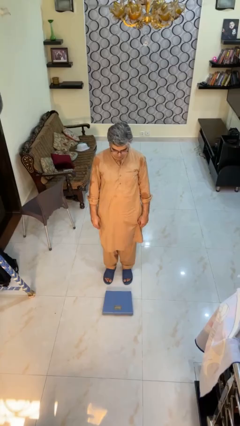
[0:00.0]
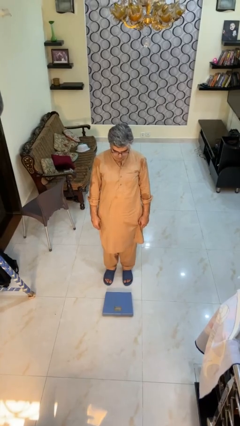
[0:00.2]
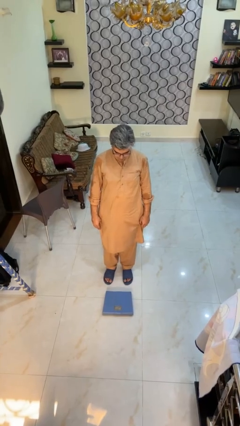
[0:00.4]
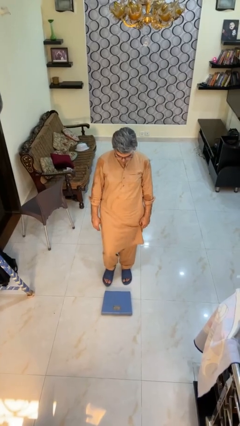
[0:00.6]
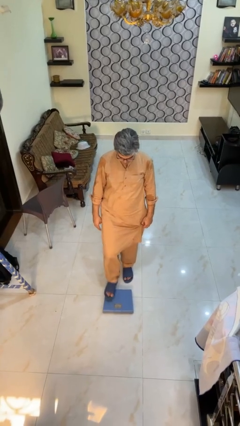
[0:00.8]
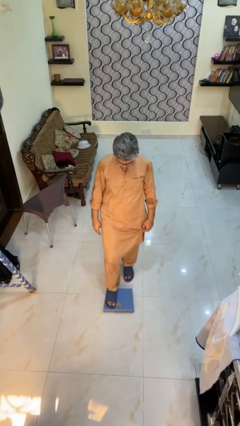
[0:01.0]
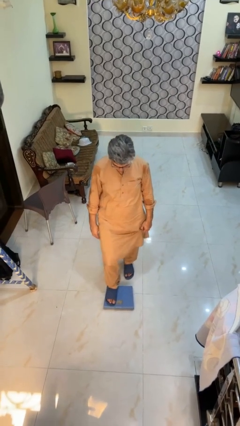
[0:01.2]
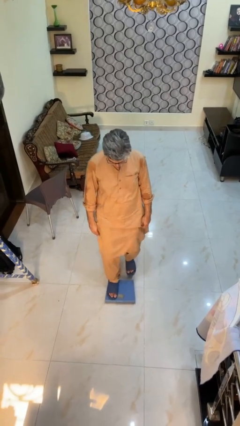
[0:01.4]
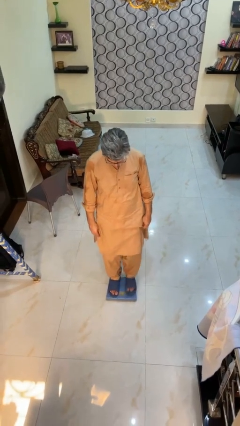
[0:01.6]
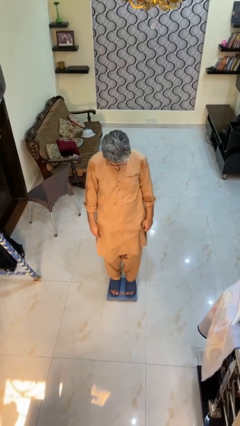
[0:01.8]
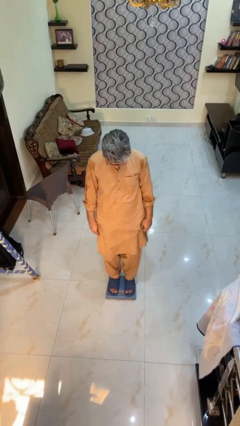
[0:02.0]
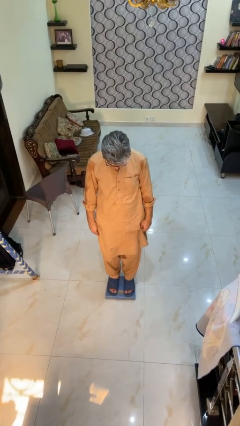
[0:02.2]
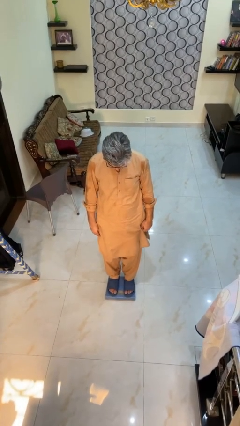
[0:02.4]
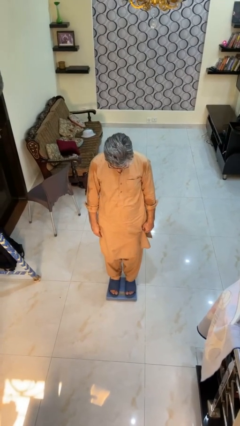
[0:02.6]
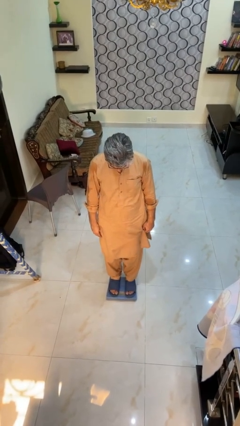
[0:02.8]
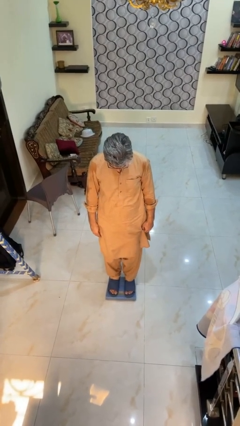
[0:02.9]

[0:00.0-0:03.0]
person uses bodyweight scale

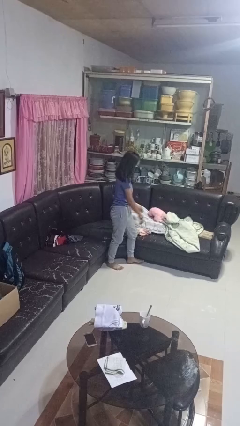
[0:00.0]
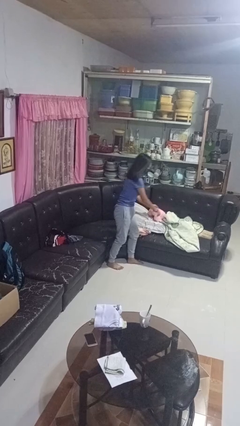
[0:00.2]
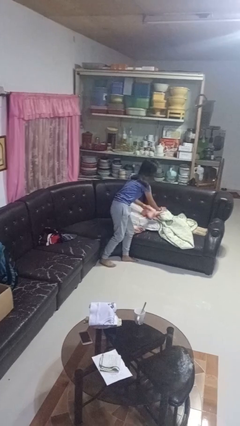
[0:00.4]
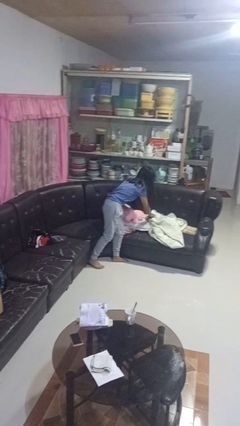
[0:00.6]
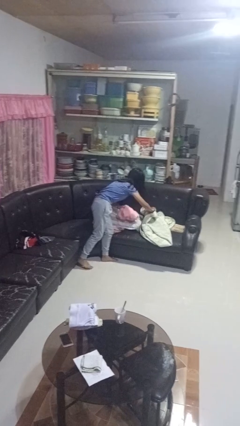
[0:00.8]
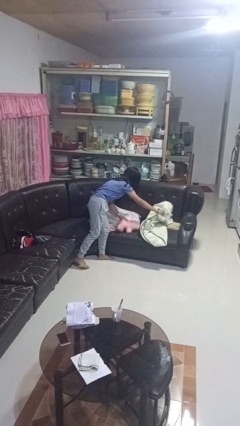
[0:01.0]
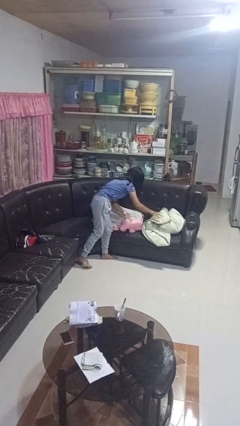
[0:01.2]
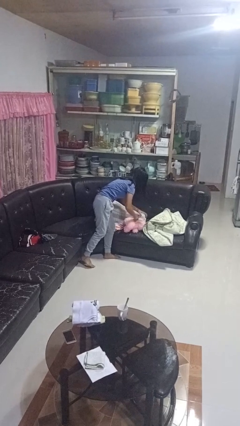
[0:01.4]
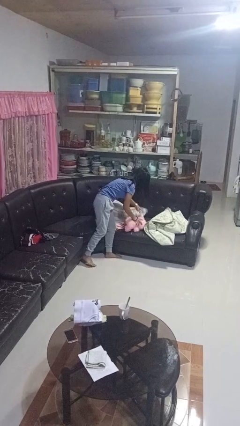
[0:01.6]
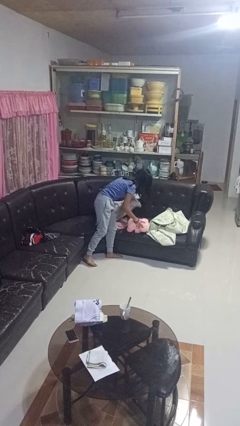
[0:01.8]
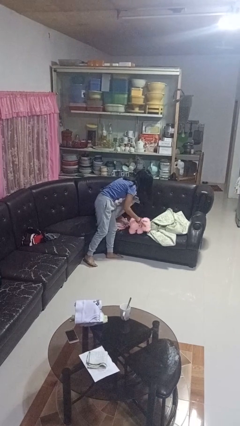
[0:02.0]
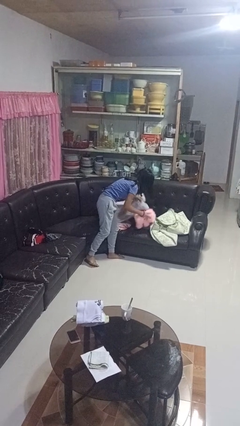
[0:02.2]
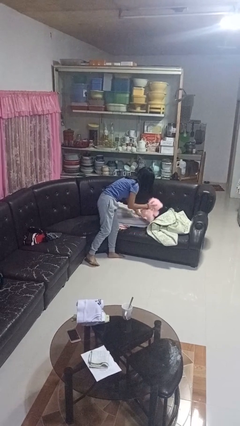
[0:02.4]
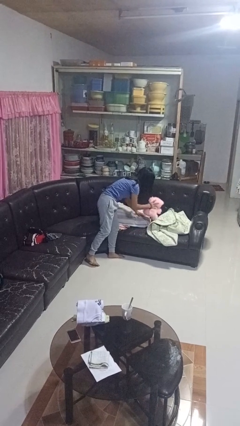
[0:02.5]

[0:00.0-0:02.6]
person searches in couch

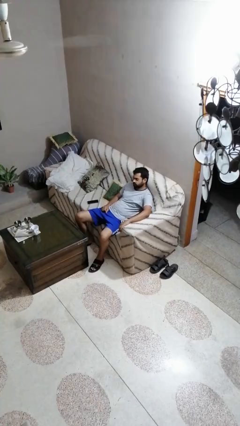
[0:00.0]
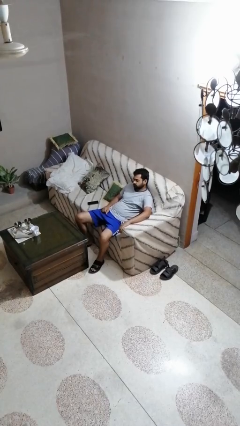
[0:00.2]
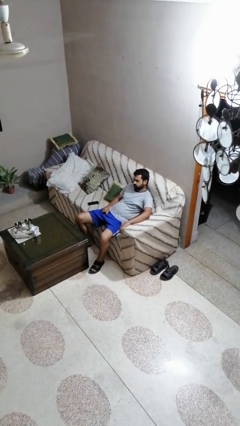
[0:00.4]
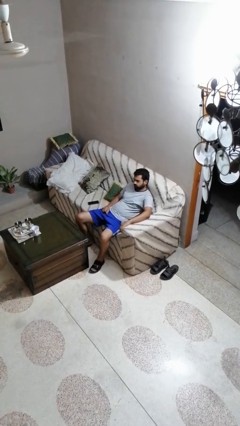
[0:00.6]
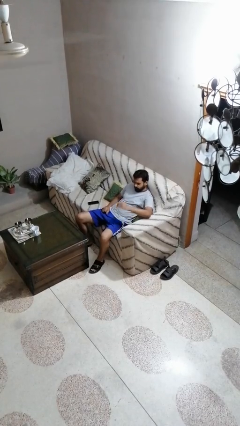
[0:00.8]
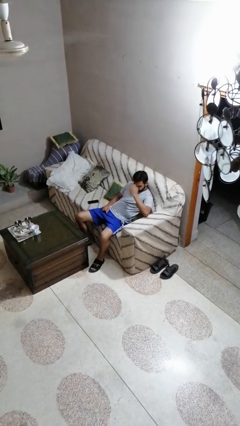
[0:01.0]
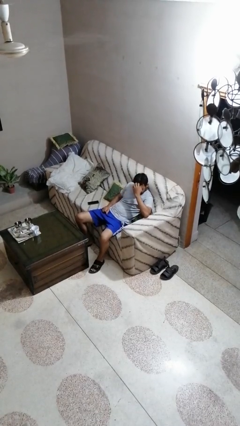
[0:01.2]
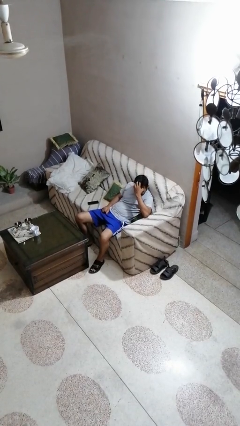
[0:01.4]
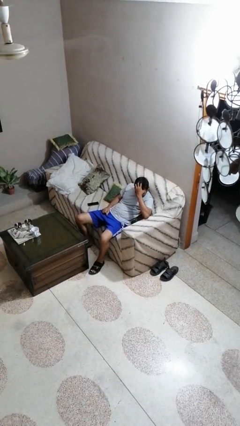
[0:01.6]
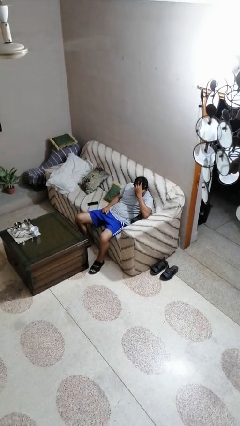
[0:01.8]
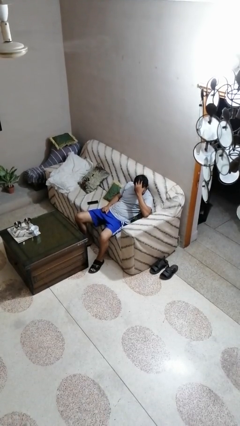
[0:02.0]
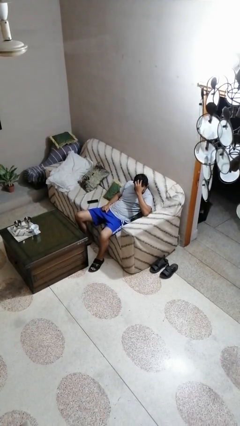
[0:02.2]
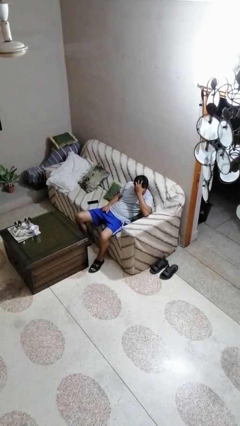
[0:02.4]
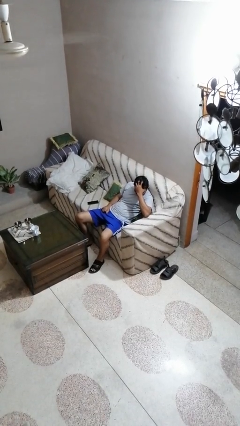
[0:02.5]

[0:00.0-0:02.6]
person strokes hair

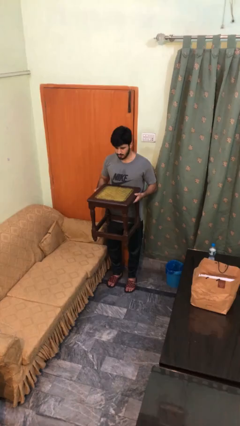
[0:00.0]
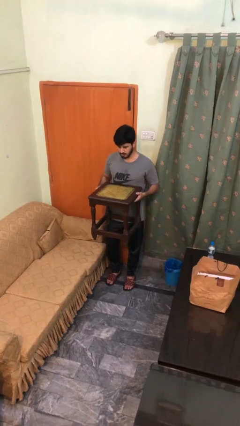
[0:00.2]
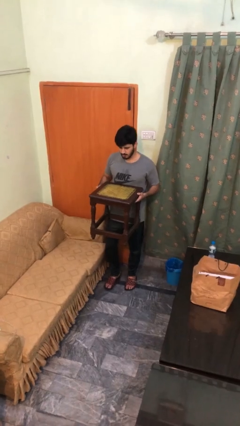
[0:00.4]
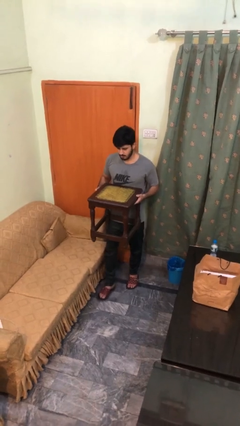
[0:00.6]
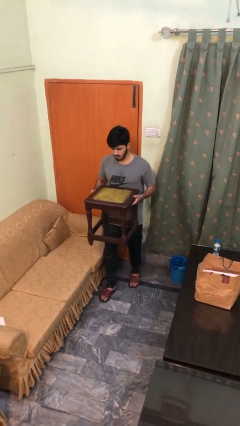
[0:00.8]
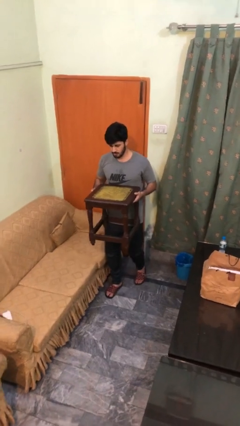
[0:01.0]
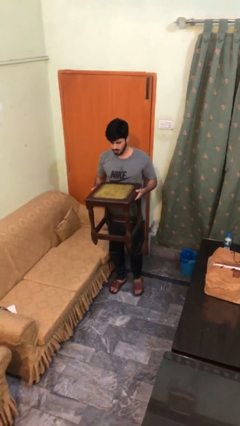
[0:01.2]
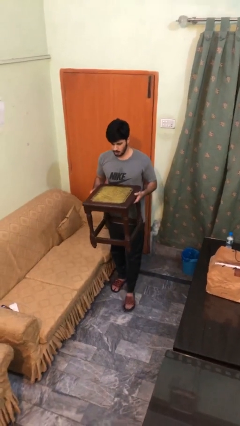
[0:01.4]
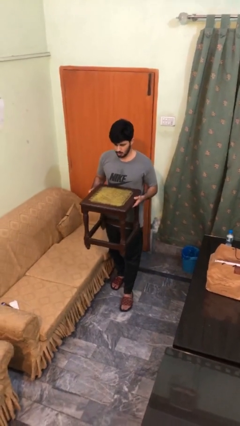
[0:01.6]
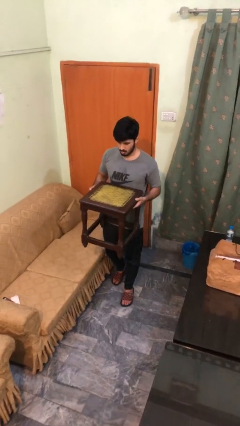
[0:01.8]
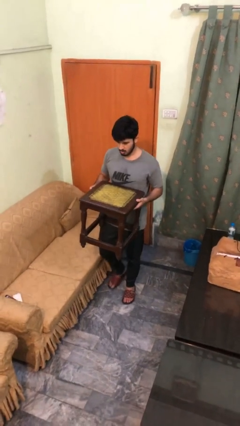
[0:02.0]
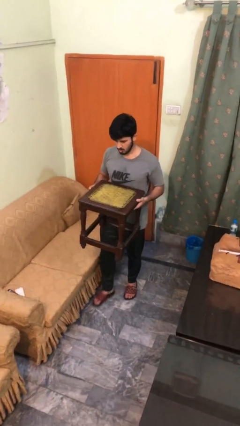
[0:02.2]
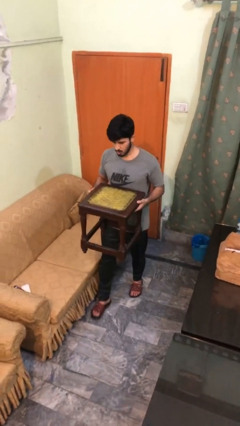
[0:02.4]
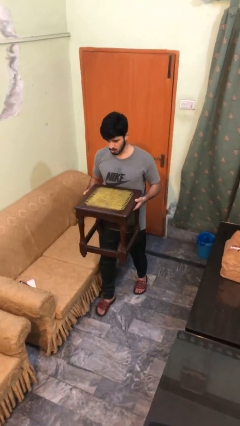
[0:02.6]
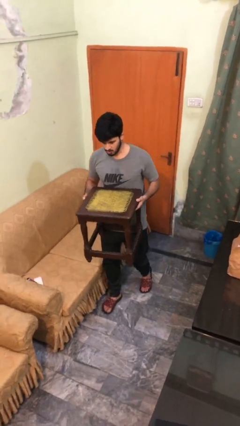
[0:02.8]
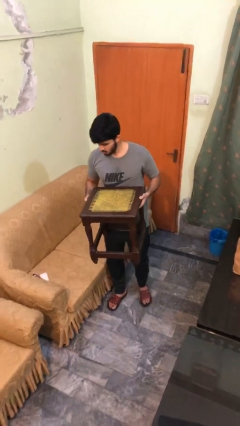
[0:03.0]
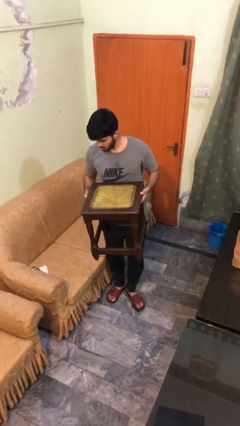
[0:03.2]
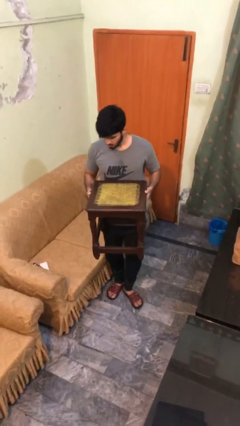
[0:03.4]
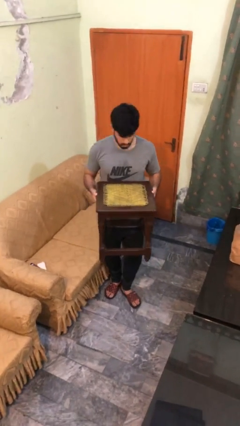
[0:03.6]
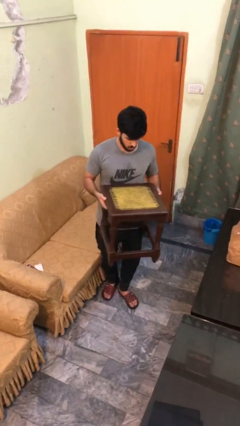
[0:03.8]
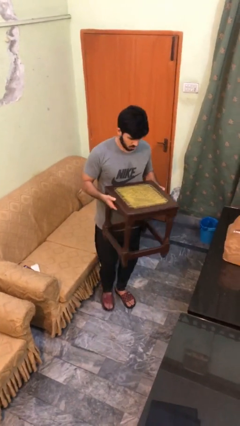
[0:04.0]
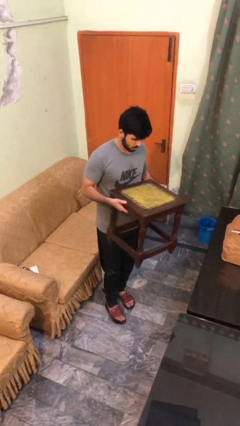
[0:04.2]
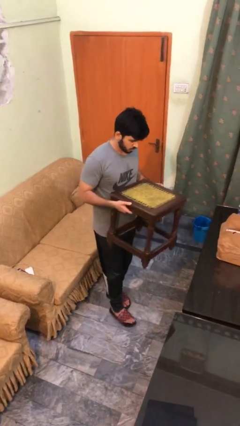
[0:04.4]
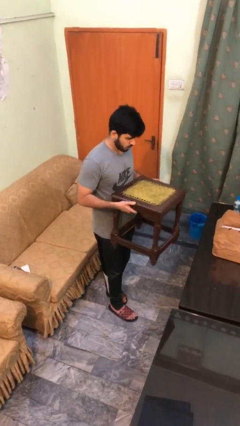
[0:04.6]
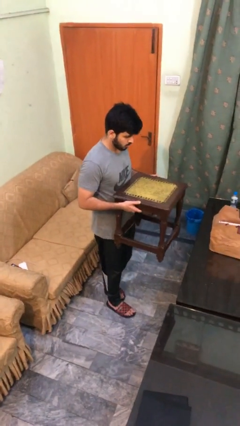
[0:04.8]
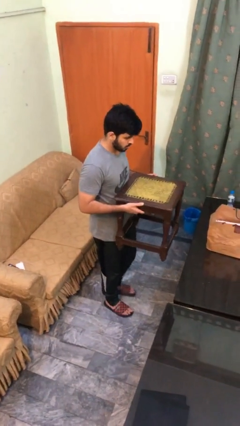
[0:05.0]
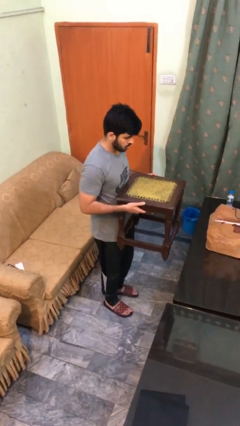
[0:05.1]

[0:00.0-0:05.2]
person carries furniture

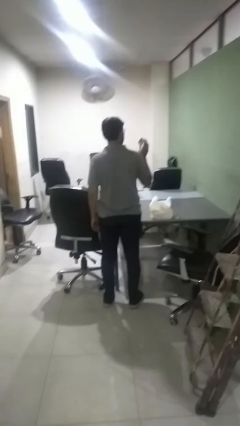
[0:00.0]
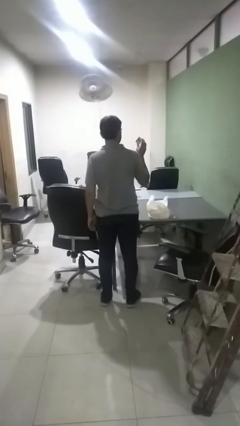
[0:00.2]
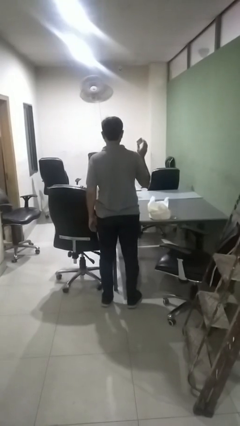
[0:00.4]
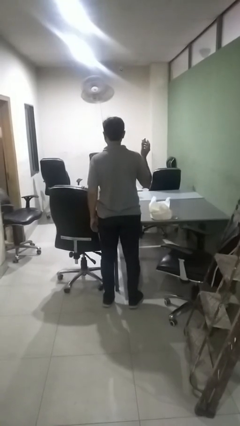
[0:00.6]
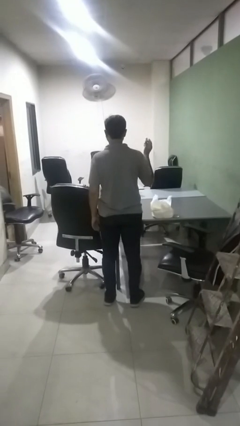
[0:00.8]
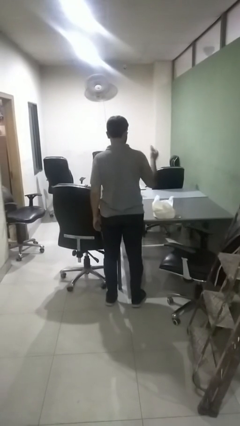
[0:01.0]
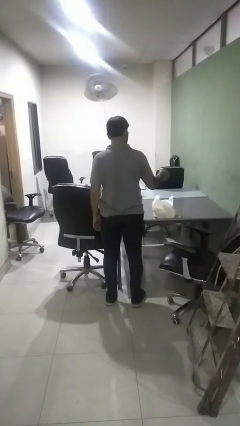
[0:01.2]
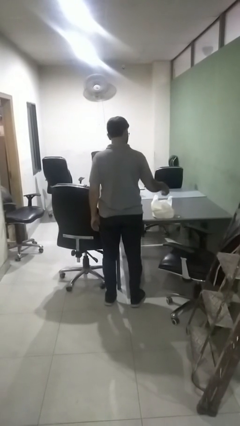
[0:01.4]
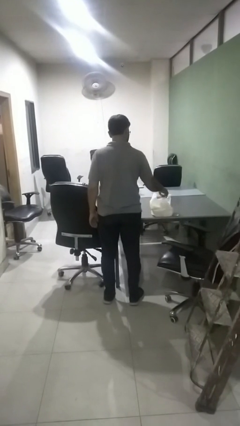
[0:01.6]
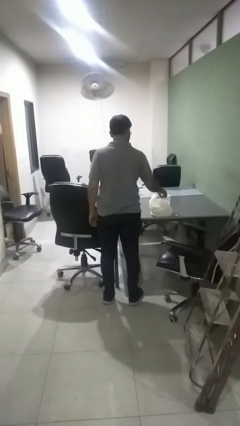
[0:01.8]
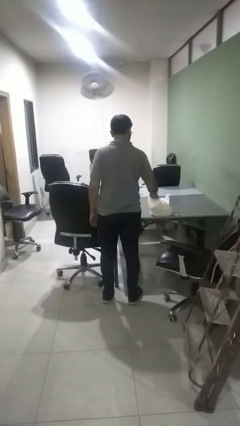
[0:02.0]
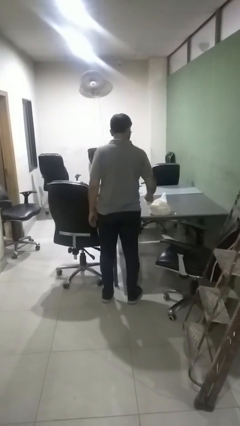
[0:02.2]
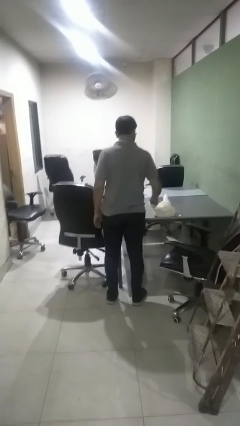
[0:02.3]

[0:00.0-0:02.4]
person puts object into bag

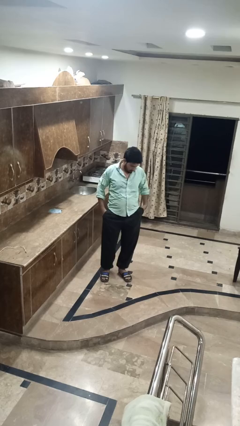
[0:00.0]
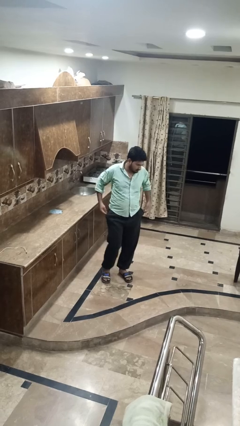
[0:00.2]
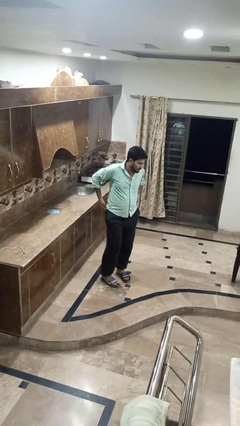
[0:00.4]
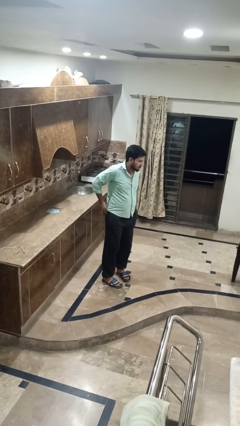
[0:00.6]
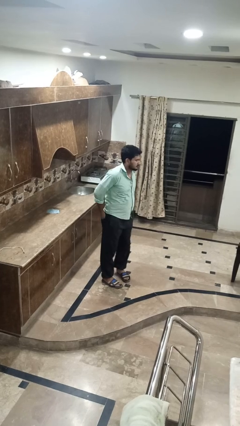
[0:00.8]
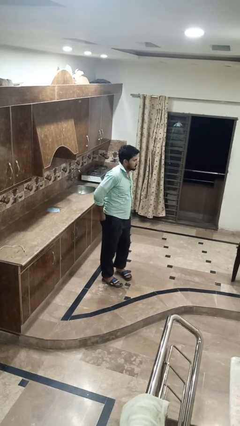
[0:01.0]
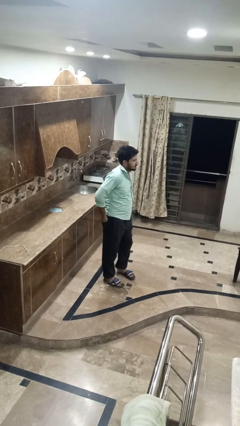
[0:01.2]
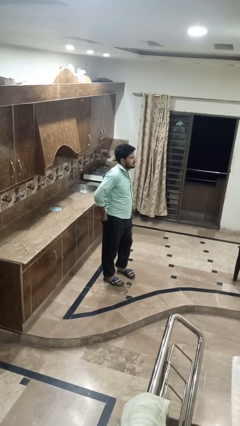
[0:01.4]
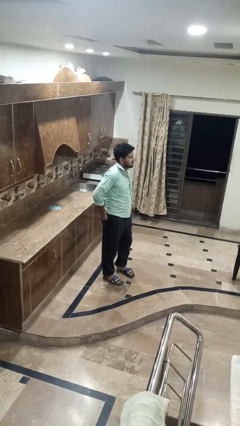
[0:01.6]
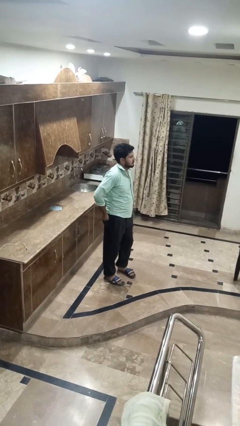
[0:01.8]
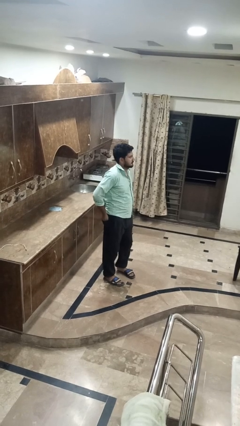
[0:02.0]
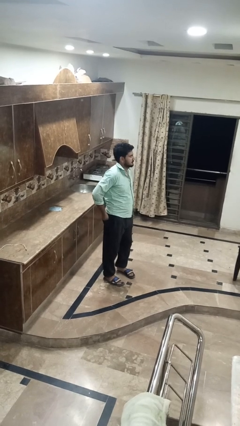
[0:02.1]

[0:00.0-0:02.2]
person puts hands in back pockets
